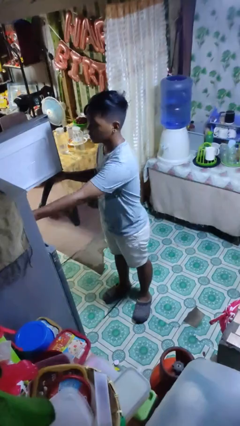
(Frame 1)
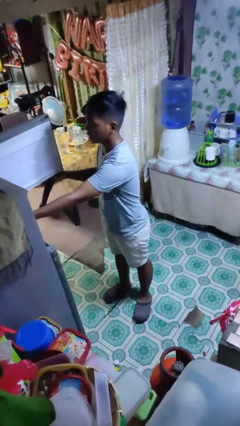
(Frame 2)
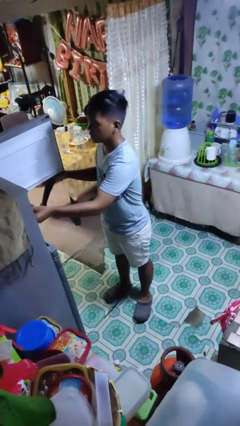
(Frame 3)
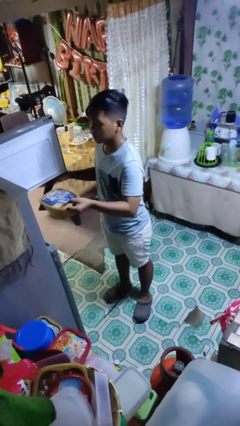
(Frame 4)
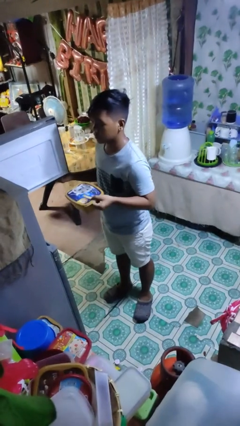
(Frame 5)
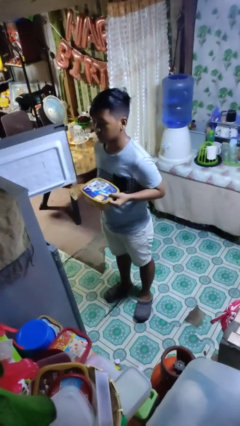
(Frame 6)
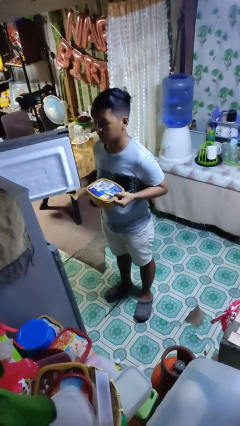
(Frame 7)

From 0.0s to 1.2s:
person takes object from refrigerator

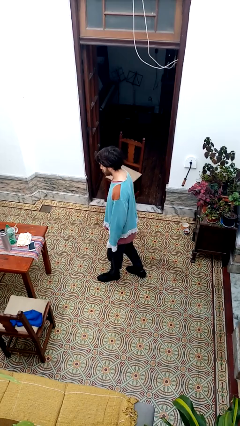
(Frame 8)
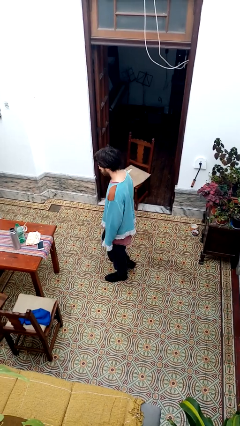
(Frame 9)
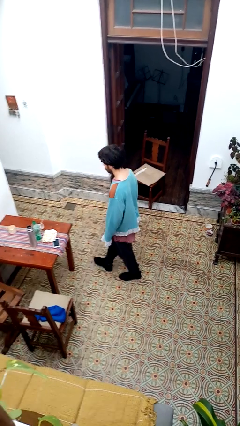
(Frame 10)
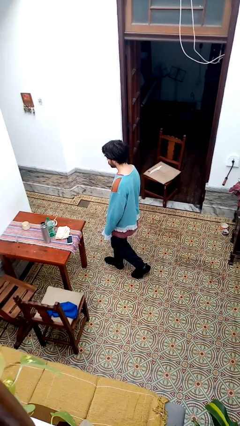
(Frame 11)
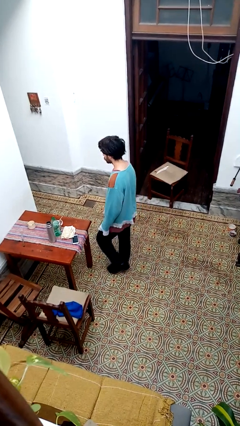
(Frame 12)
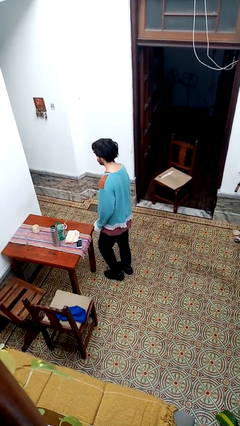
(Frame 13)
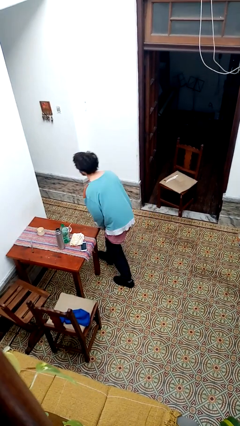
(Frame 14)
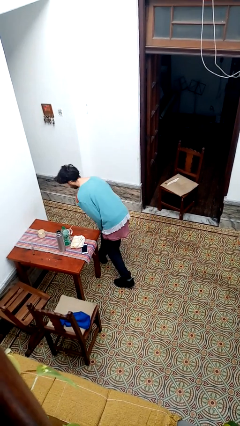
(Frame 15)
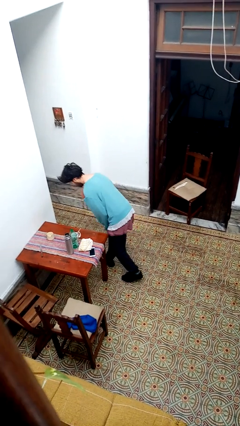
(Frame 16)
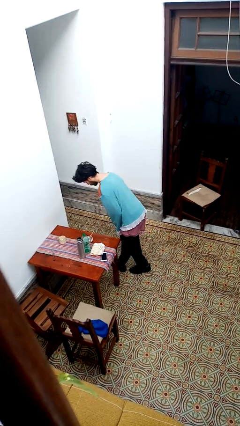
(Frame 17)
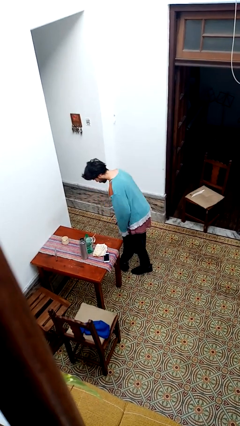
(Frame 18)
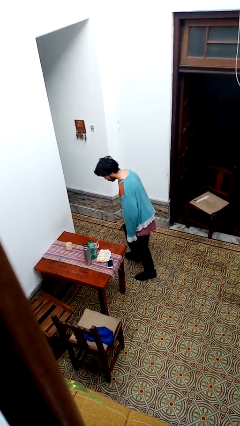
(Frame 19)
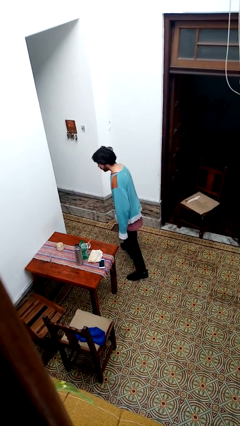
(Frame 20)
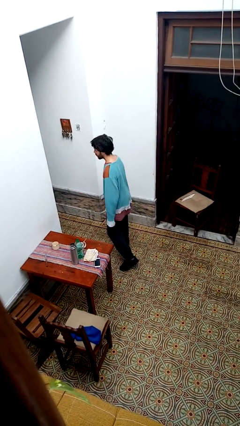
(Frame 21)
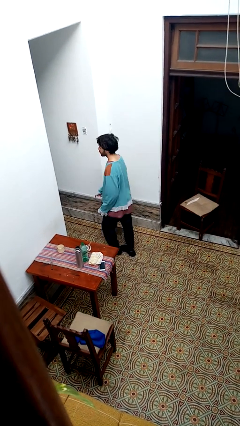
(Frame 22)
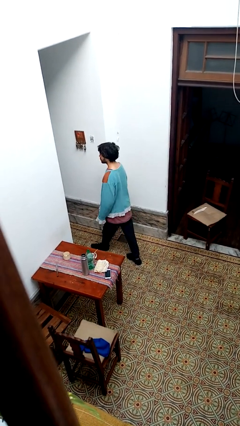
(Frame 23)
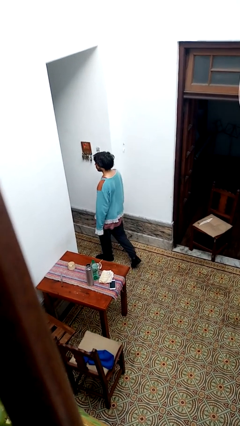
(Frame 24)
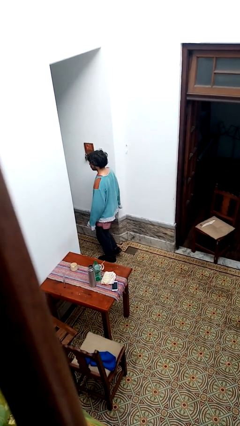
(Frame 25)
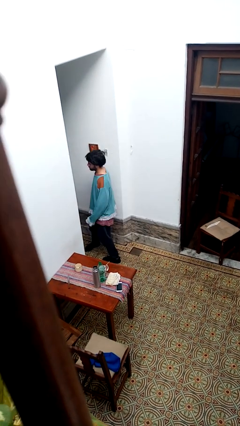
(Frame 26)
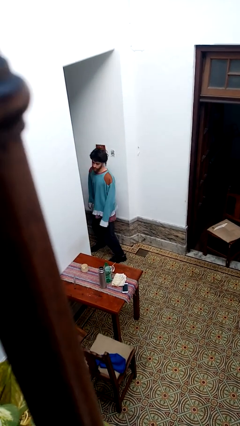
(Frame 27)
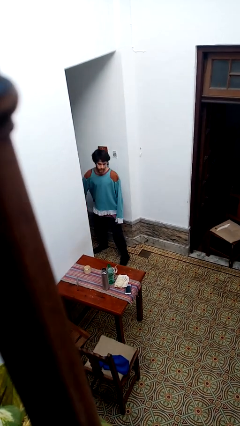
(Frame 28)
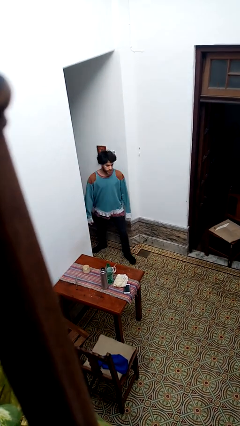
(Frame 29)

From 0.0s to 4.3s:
person bumps into table

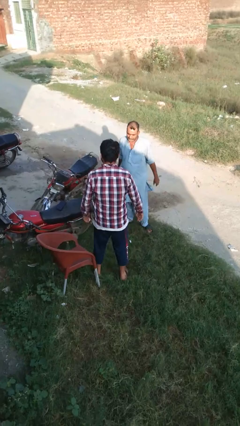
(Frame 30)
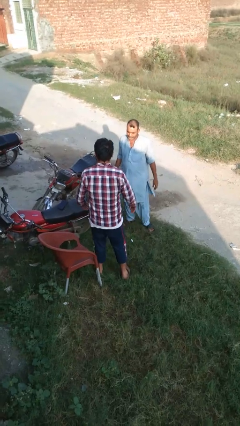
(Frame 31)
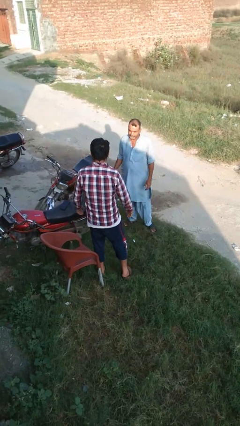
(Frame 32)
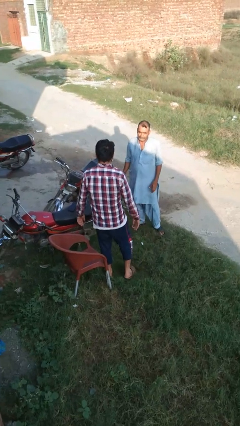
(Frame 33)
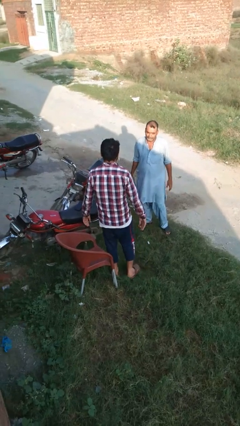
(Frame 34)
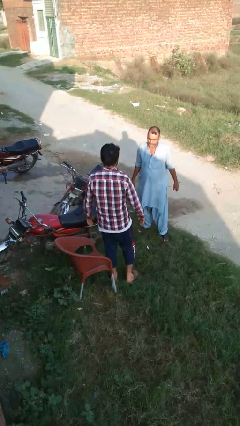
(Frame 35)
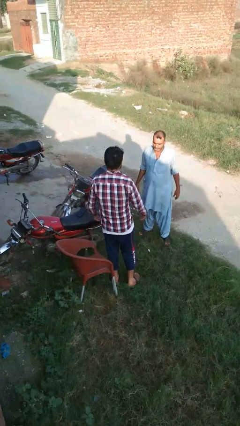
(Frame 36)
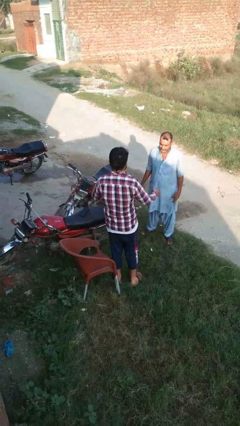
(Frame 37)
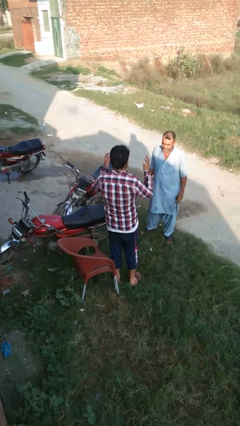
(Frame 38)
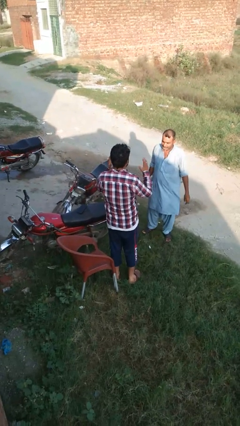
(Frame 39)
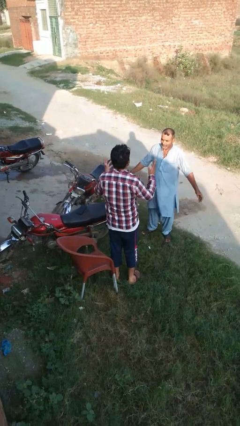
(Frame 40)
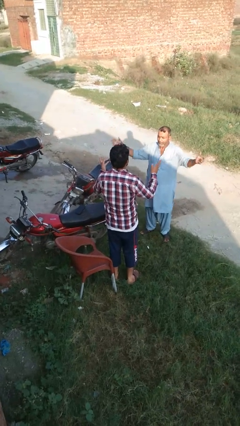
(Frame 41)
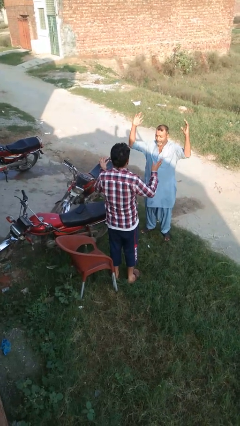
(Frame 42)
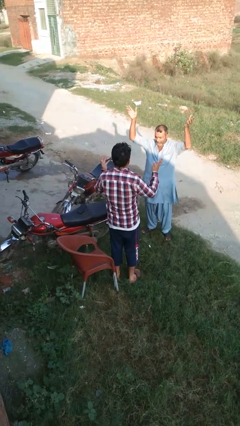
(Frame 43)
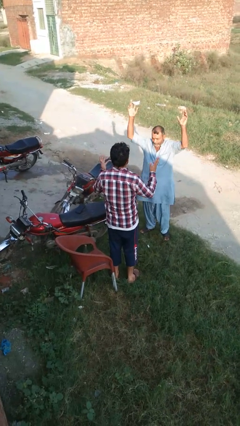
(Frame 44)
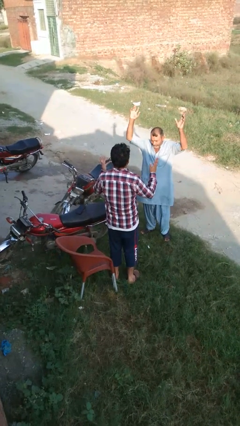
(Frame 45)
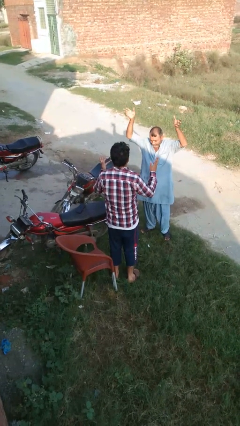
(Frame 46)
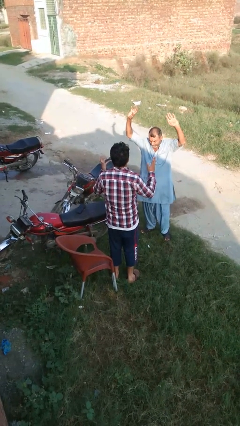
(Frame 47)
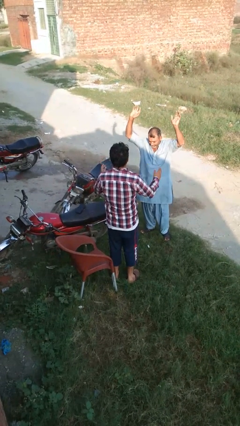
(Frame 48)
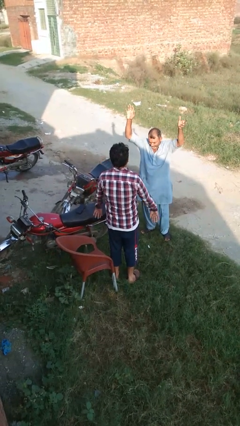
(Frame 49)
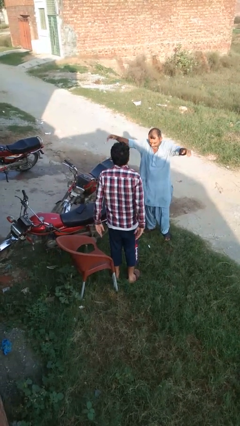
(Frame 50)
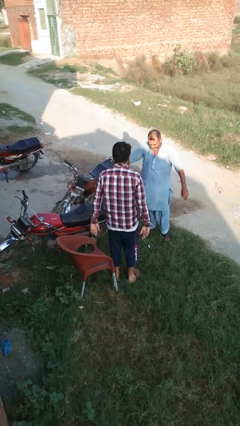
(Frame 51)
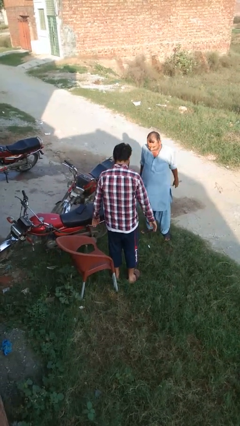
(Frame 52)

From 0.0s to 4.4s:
person laughs with person

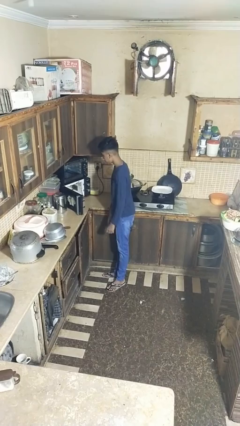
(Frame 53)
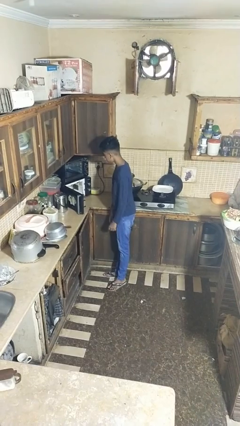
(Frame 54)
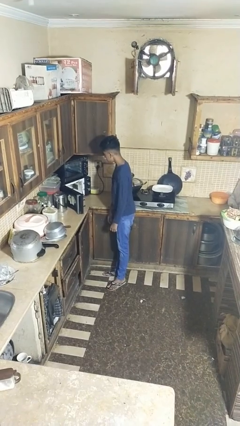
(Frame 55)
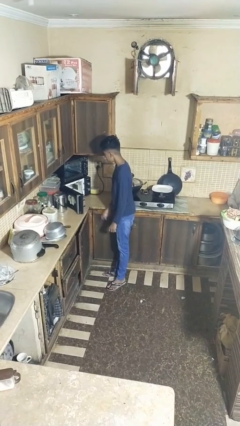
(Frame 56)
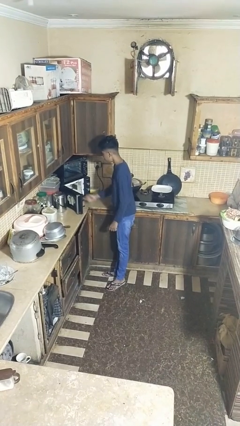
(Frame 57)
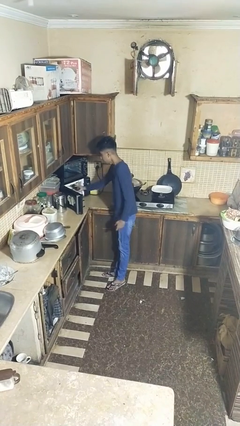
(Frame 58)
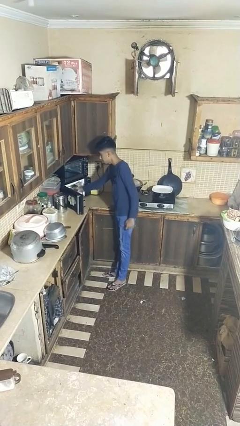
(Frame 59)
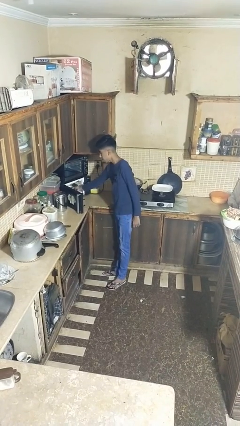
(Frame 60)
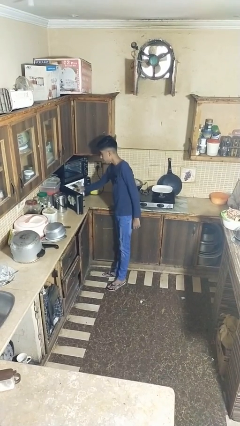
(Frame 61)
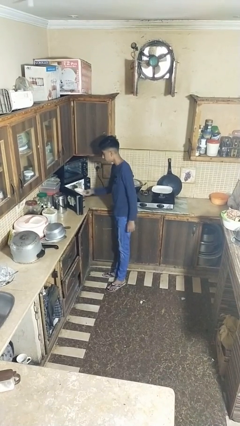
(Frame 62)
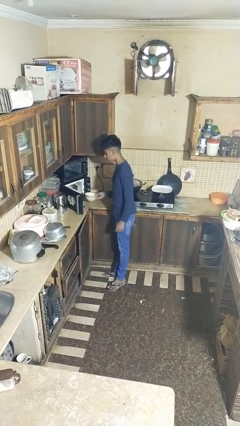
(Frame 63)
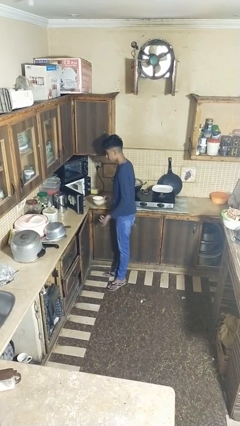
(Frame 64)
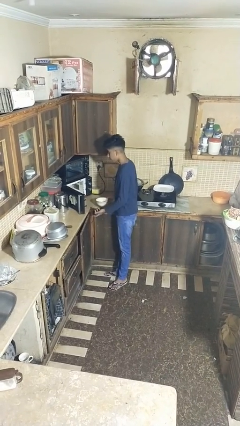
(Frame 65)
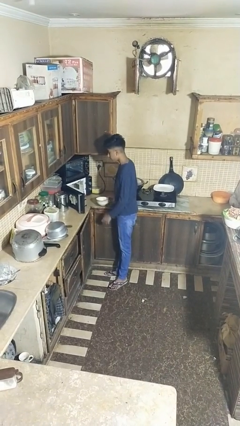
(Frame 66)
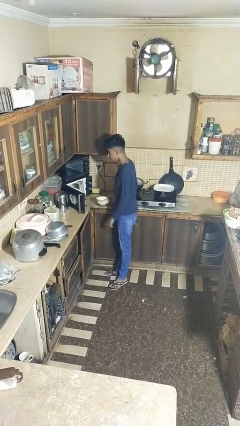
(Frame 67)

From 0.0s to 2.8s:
person takes object from microwave

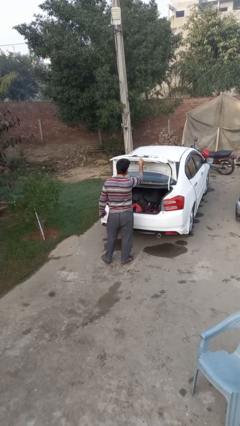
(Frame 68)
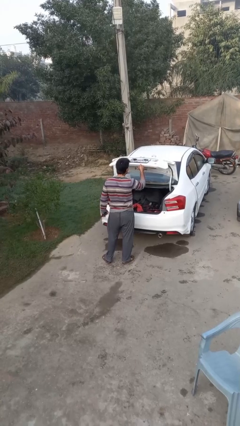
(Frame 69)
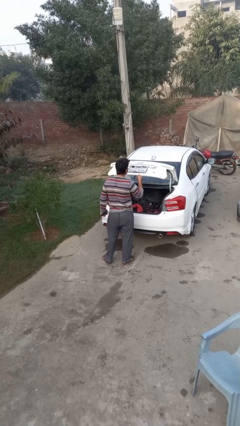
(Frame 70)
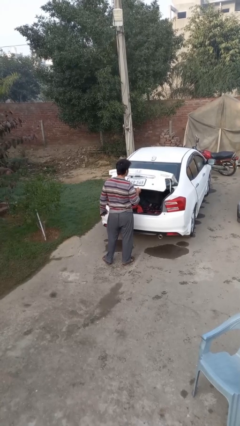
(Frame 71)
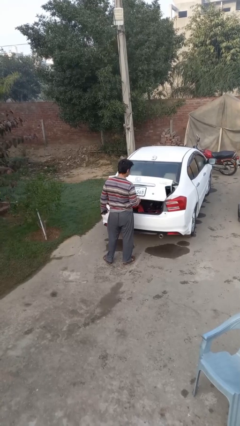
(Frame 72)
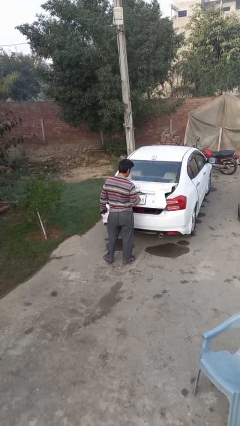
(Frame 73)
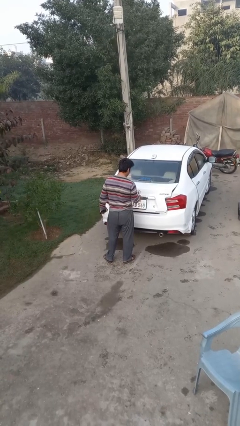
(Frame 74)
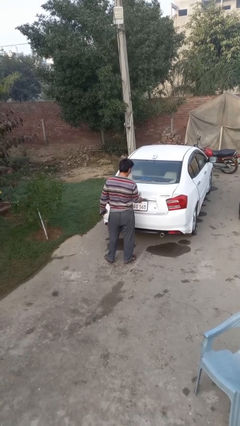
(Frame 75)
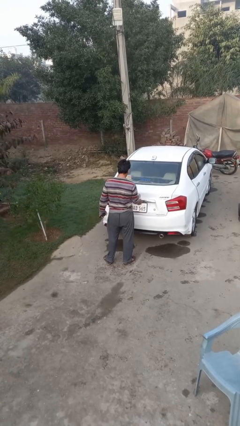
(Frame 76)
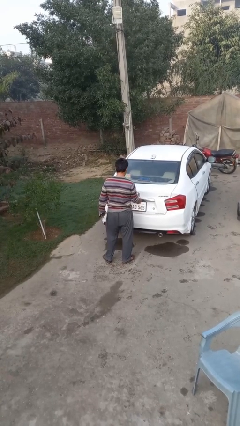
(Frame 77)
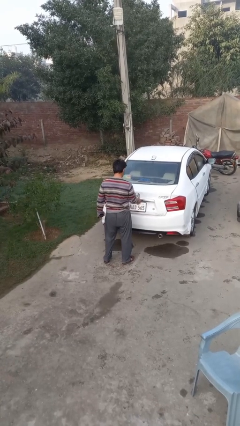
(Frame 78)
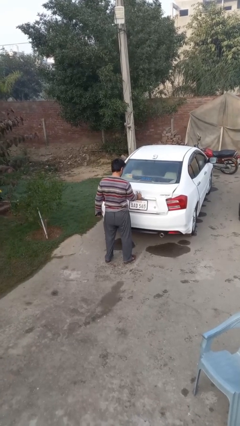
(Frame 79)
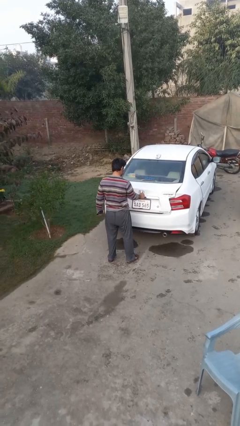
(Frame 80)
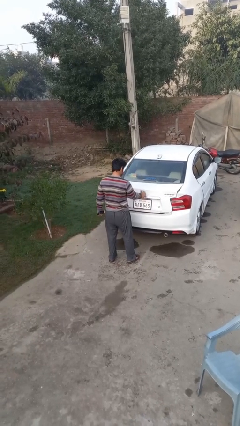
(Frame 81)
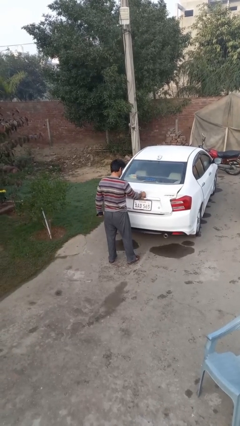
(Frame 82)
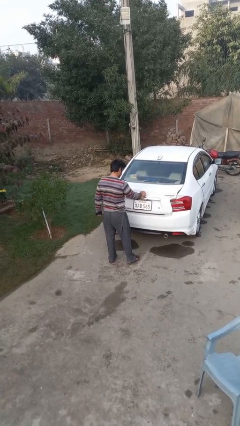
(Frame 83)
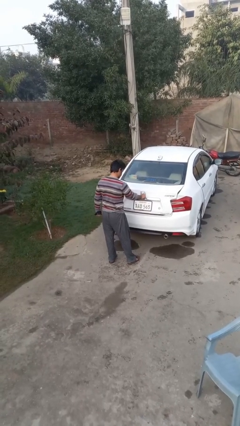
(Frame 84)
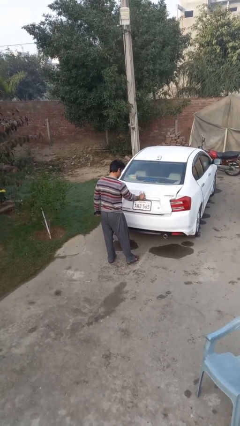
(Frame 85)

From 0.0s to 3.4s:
person closes car trunk

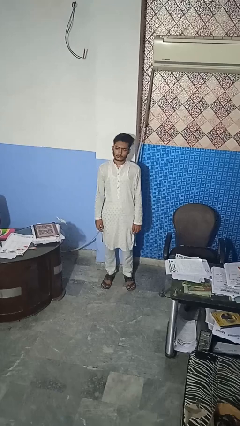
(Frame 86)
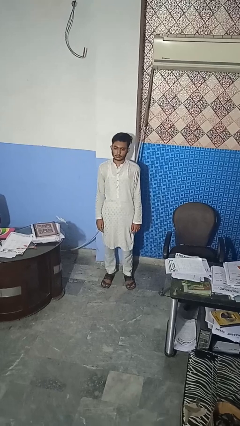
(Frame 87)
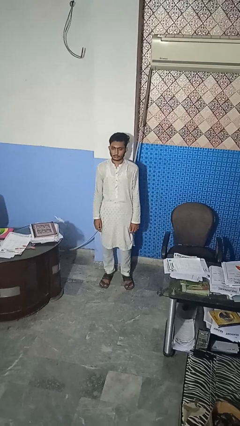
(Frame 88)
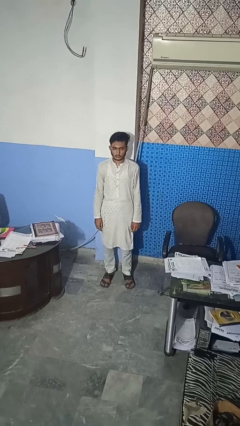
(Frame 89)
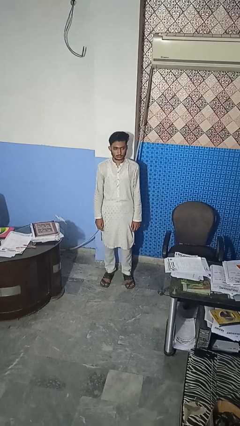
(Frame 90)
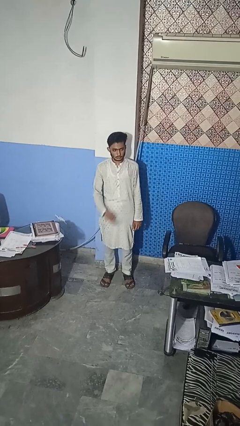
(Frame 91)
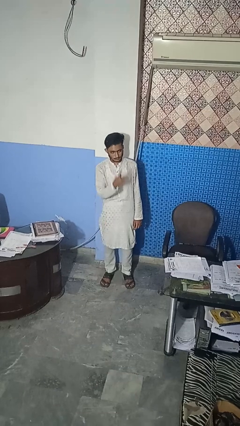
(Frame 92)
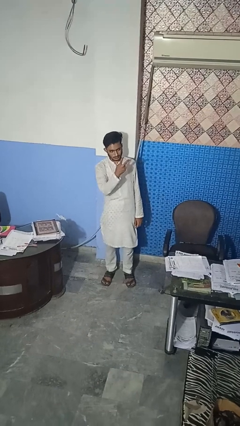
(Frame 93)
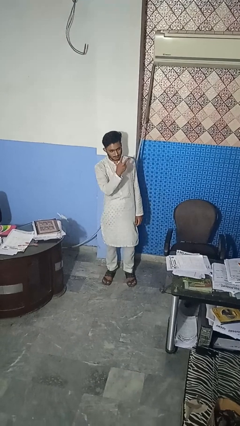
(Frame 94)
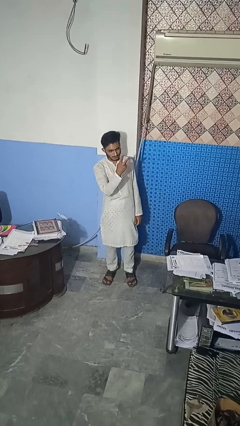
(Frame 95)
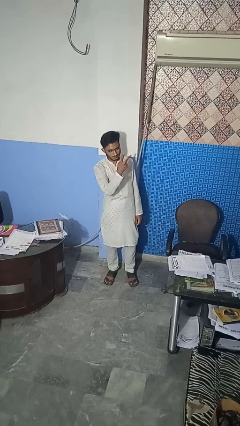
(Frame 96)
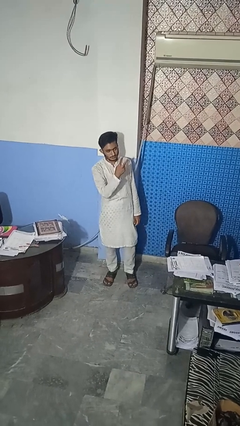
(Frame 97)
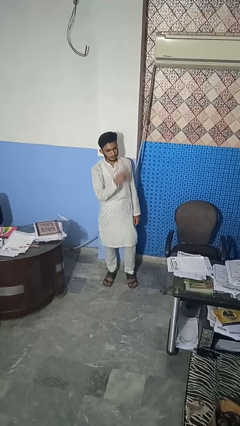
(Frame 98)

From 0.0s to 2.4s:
person gestures peace
